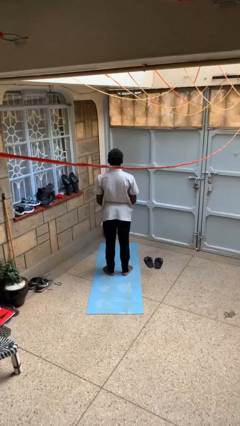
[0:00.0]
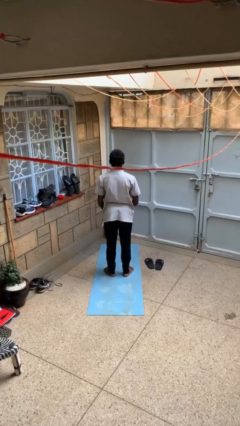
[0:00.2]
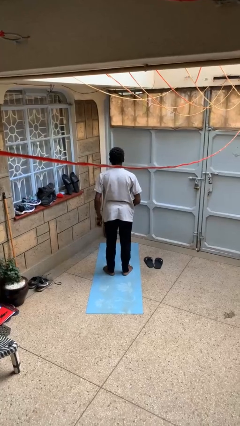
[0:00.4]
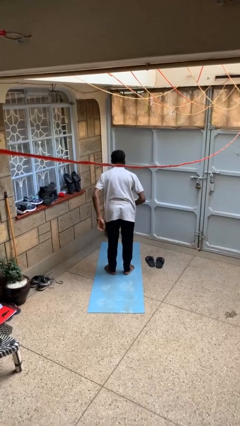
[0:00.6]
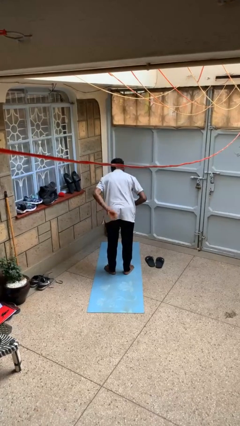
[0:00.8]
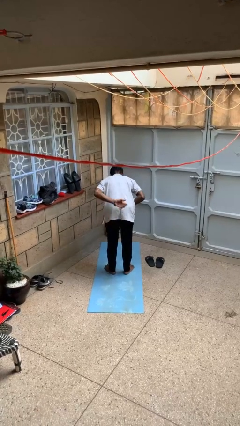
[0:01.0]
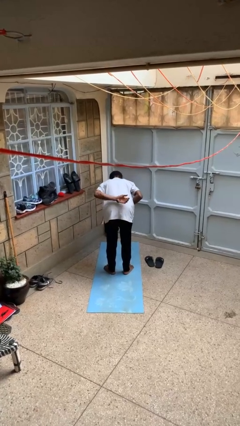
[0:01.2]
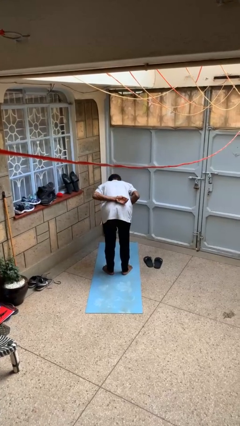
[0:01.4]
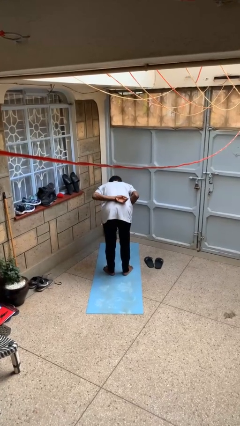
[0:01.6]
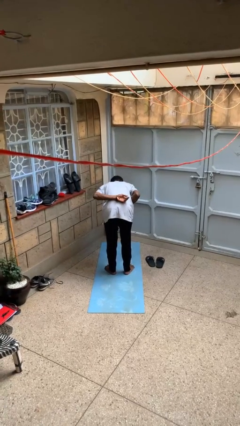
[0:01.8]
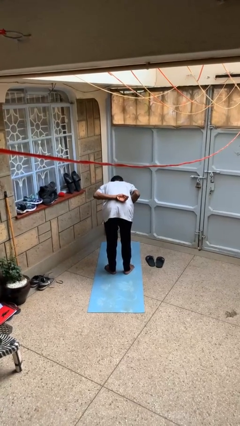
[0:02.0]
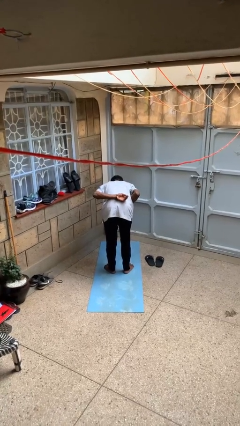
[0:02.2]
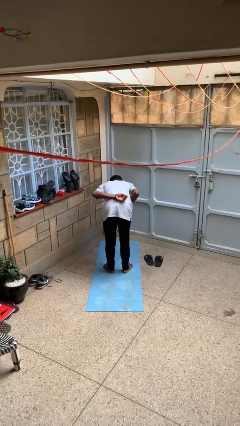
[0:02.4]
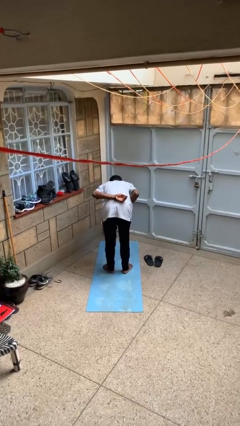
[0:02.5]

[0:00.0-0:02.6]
person bows

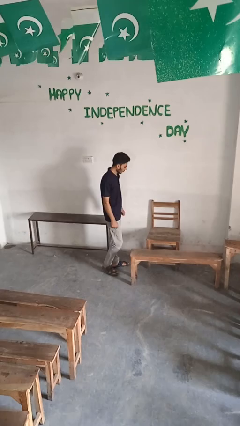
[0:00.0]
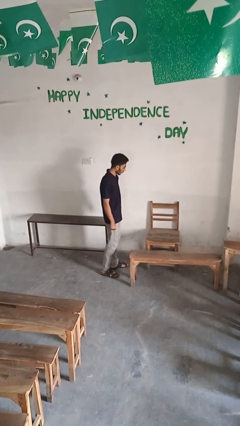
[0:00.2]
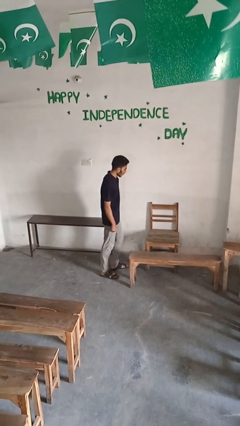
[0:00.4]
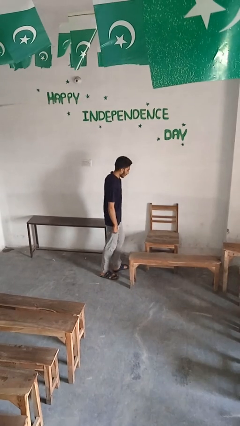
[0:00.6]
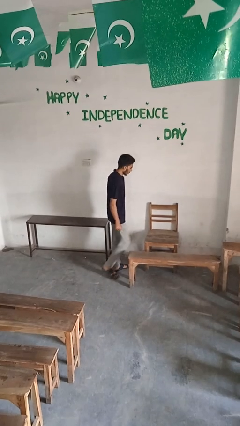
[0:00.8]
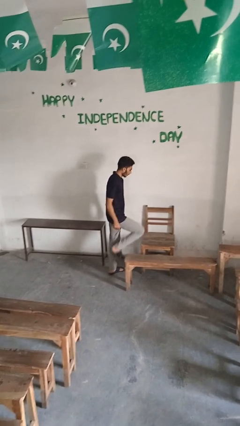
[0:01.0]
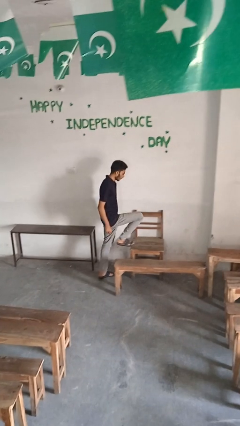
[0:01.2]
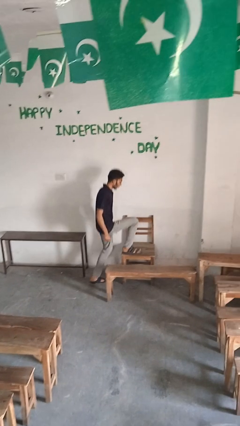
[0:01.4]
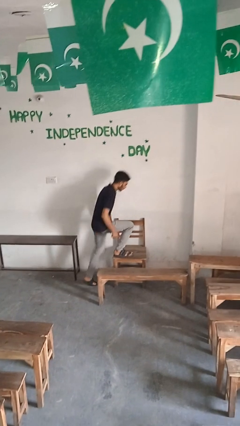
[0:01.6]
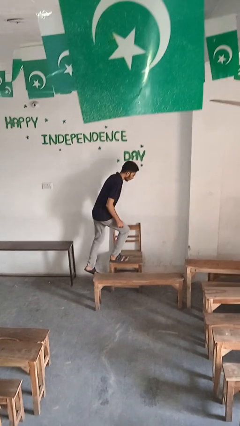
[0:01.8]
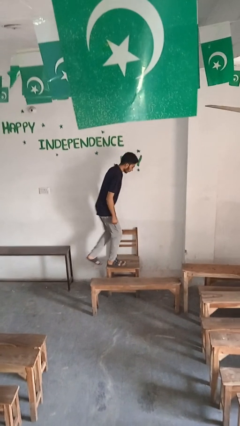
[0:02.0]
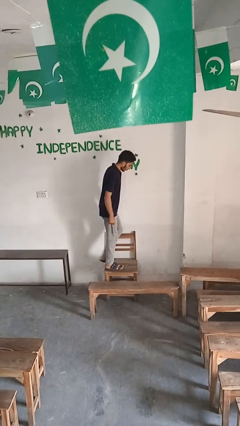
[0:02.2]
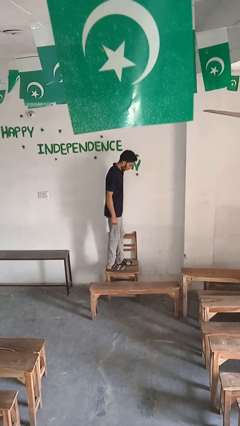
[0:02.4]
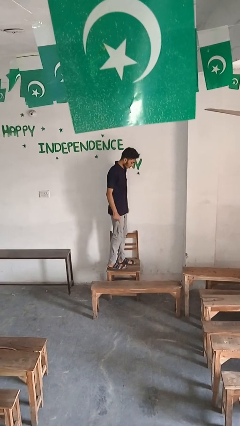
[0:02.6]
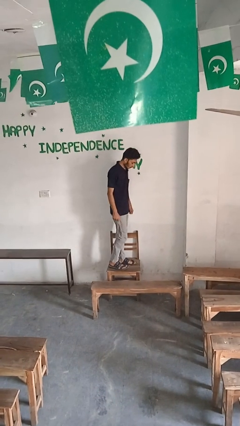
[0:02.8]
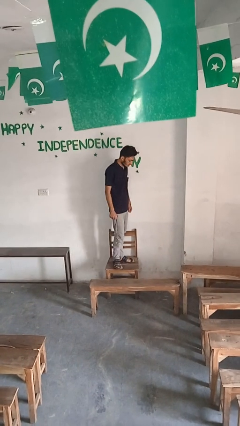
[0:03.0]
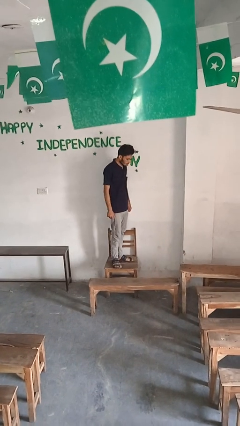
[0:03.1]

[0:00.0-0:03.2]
person climbs on chair

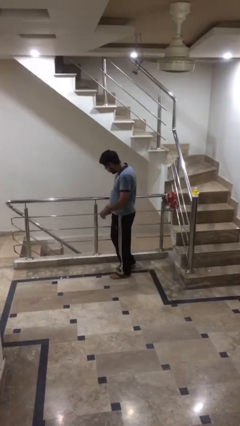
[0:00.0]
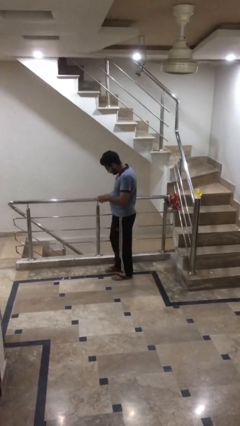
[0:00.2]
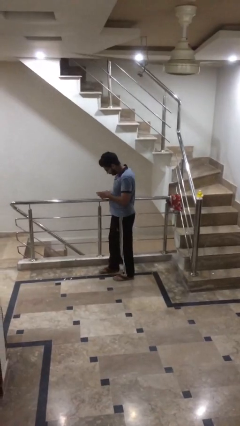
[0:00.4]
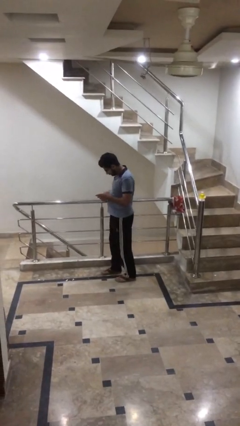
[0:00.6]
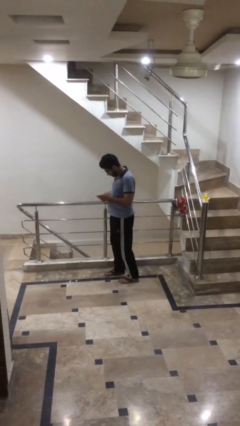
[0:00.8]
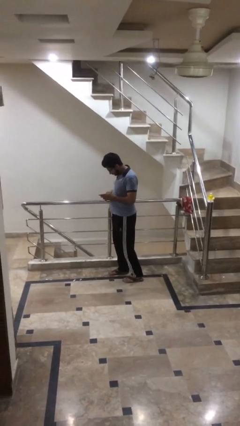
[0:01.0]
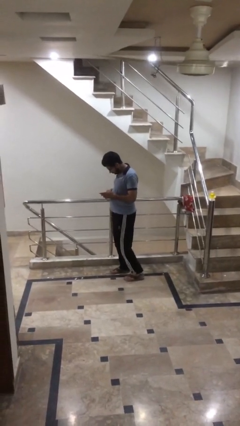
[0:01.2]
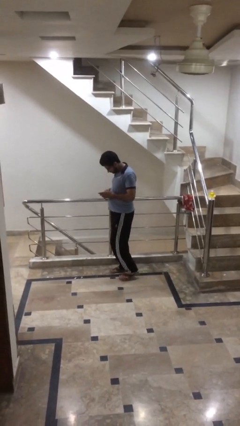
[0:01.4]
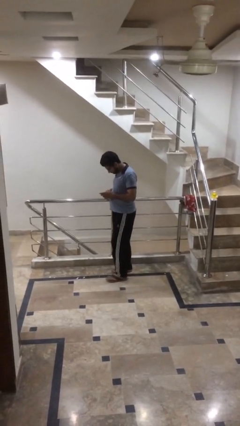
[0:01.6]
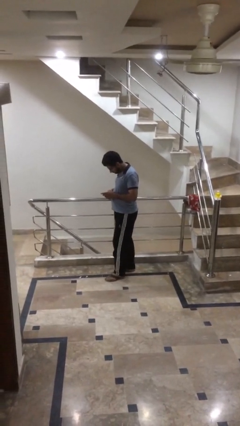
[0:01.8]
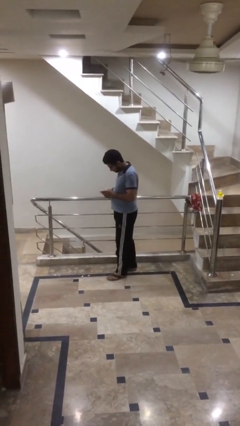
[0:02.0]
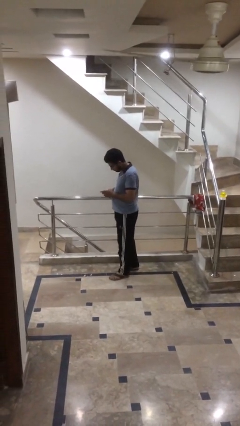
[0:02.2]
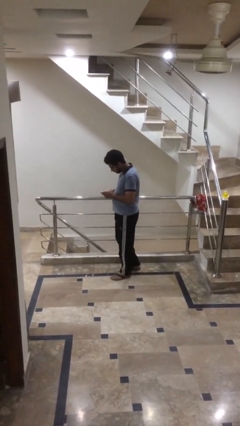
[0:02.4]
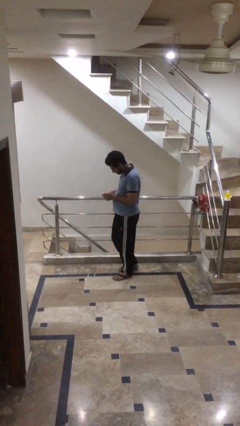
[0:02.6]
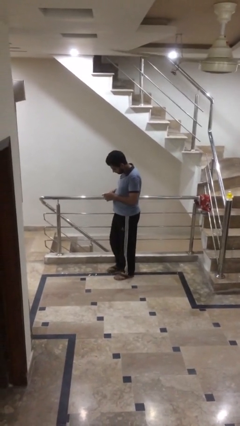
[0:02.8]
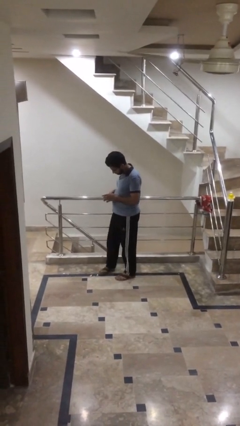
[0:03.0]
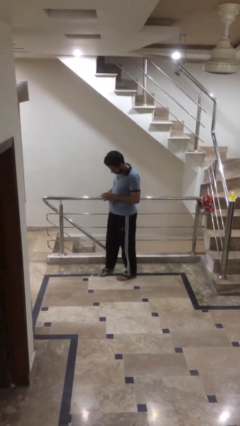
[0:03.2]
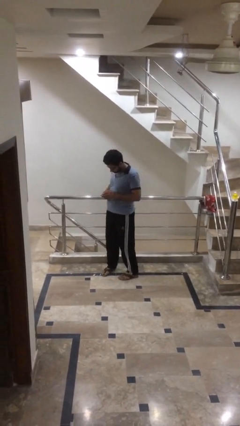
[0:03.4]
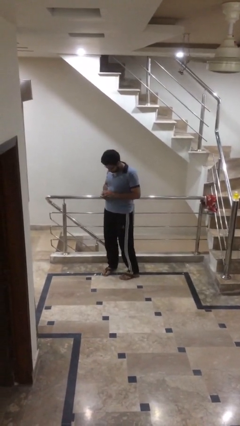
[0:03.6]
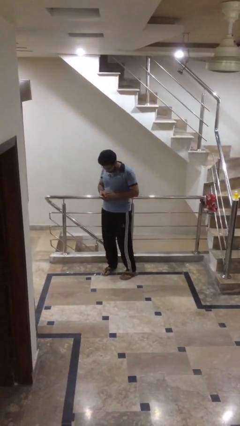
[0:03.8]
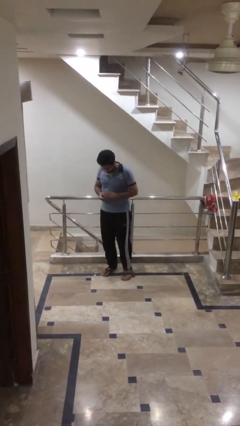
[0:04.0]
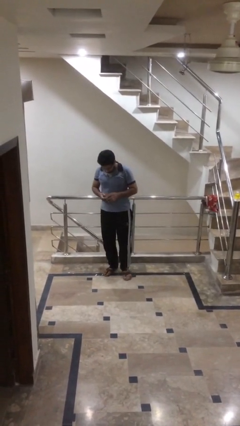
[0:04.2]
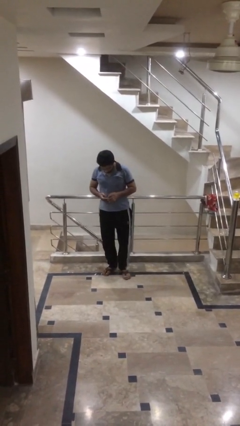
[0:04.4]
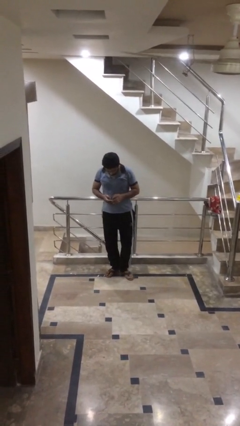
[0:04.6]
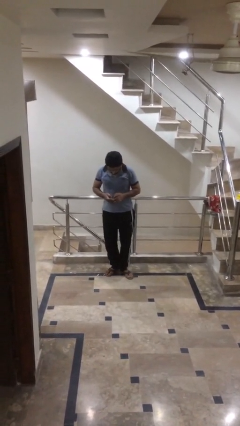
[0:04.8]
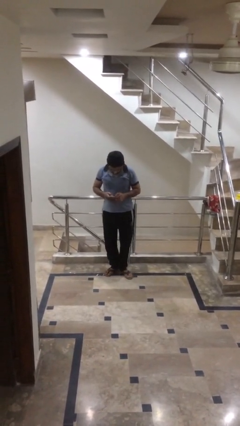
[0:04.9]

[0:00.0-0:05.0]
person texts on phone

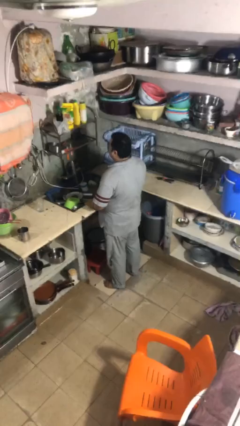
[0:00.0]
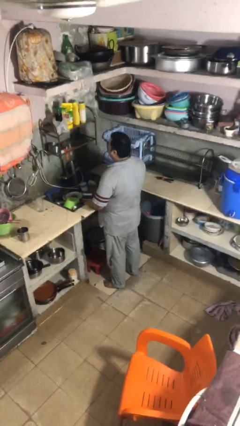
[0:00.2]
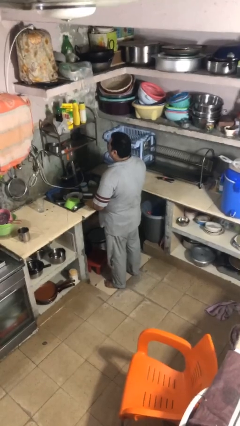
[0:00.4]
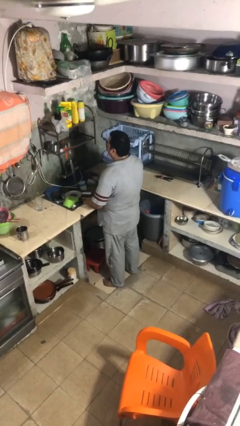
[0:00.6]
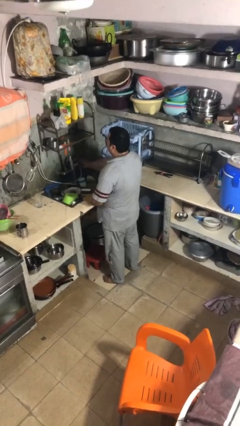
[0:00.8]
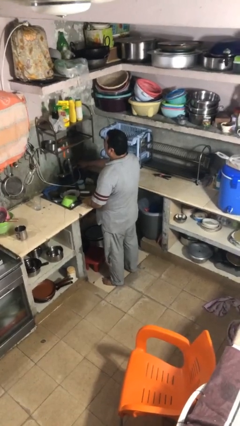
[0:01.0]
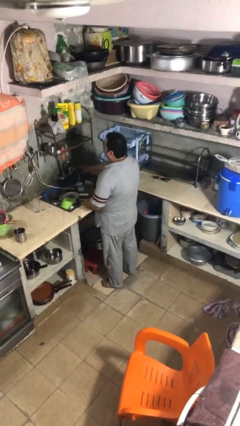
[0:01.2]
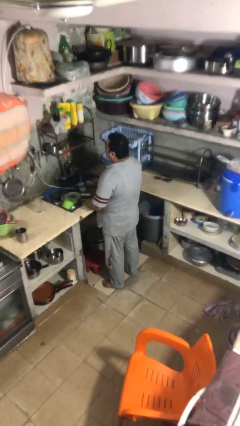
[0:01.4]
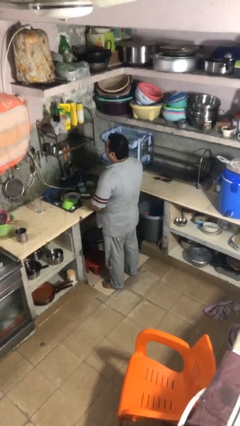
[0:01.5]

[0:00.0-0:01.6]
person turns off faucet

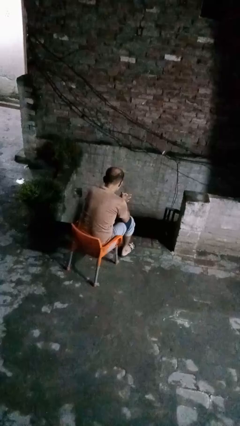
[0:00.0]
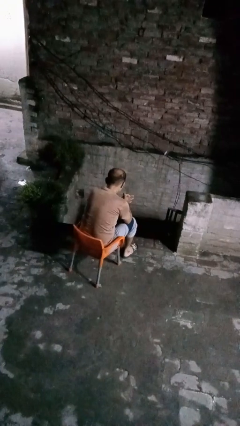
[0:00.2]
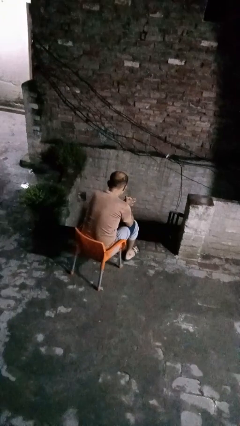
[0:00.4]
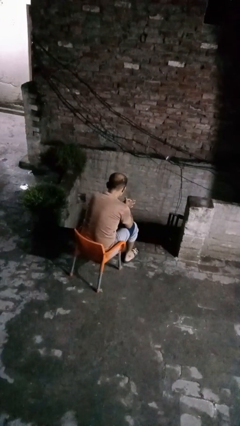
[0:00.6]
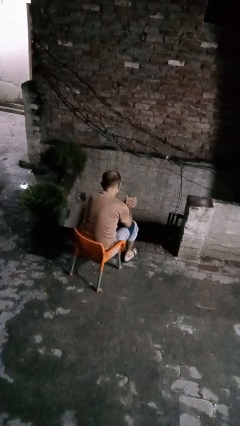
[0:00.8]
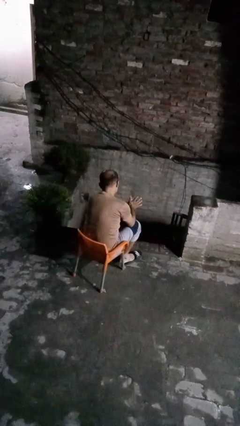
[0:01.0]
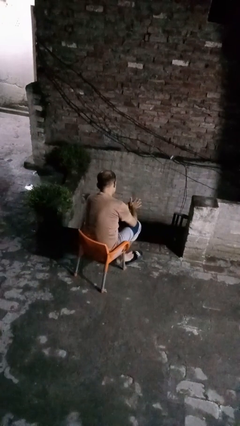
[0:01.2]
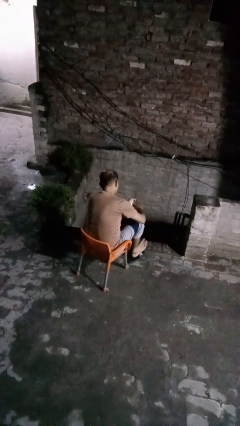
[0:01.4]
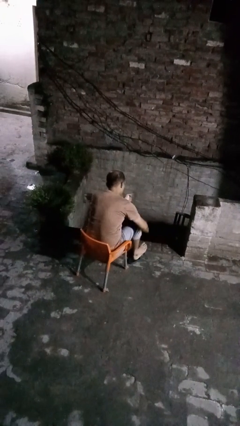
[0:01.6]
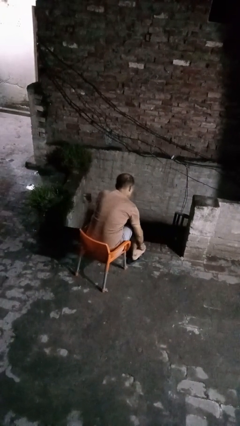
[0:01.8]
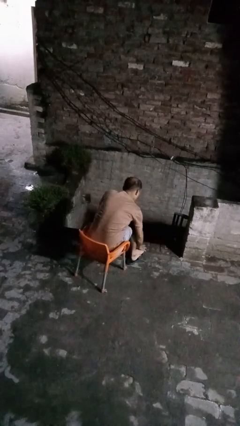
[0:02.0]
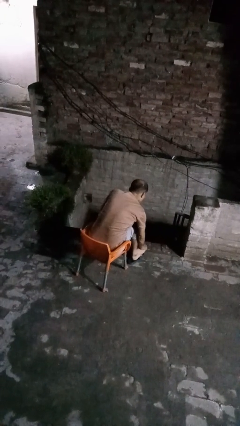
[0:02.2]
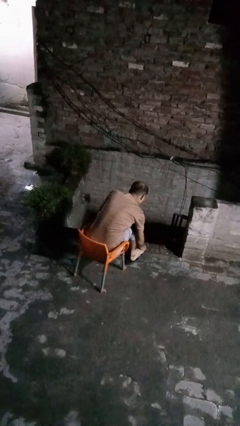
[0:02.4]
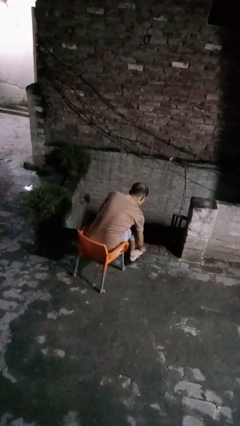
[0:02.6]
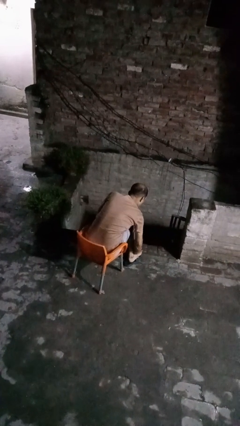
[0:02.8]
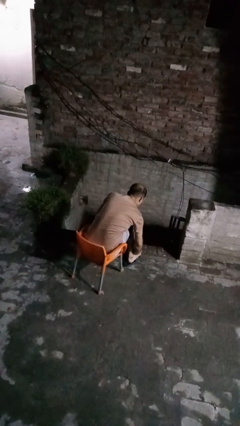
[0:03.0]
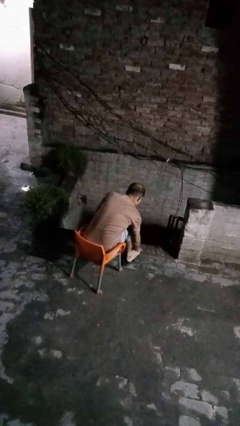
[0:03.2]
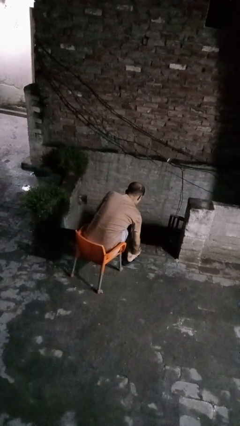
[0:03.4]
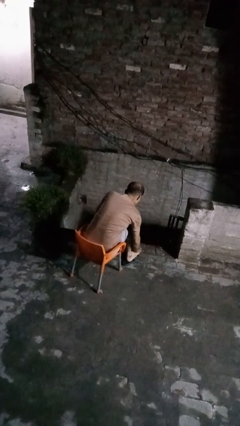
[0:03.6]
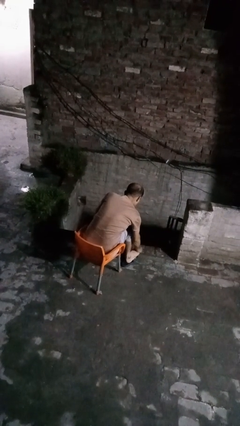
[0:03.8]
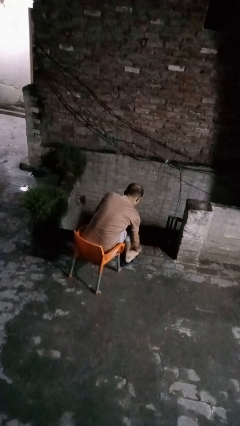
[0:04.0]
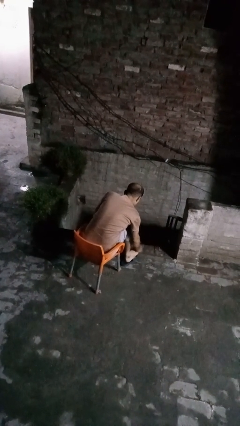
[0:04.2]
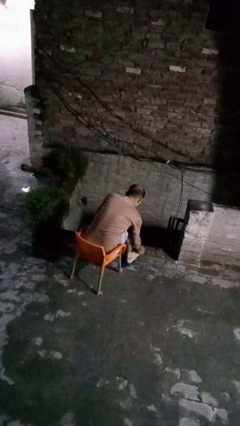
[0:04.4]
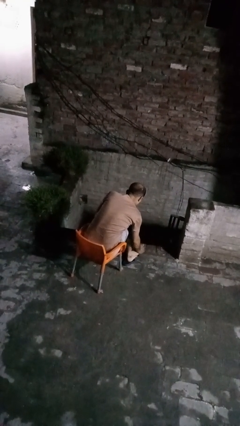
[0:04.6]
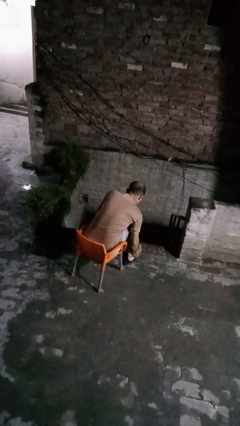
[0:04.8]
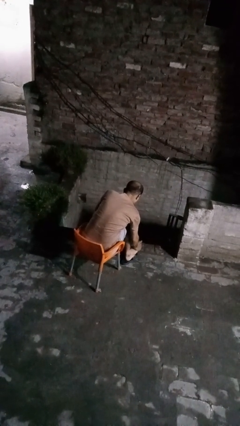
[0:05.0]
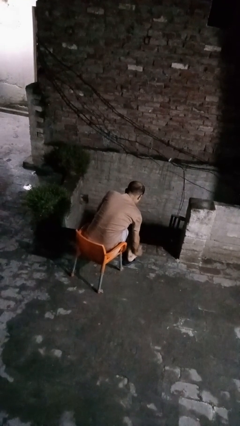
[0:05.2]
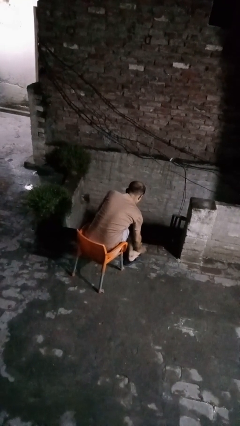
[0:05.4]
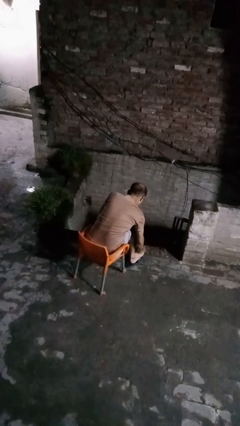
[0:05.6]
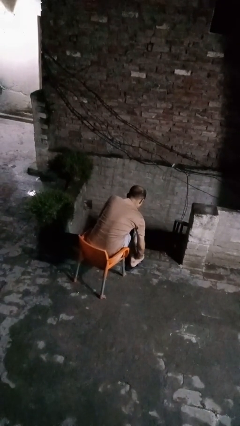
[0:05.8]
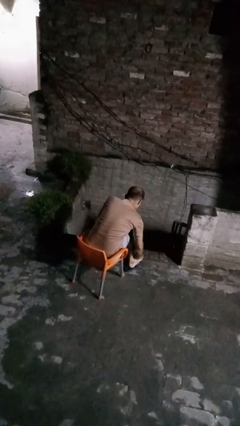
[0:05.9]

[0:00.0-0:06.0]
person rubs foot
